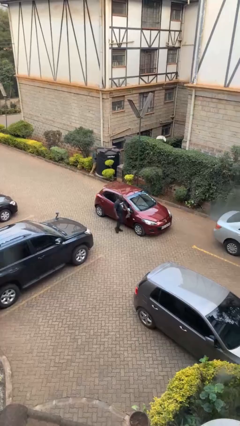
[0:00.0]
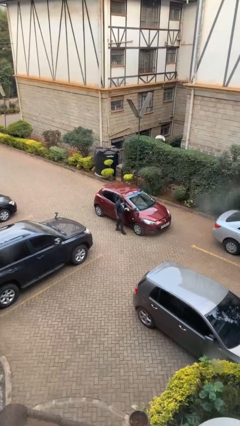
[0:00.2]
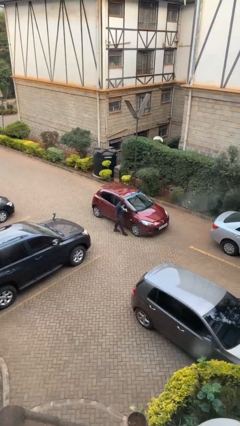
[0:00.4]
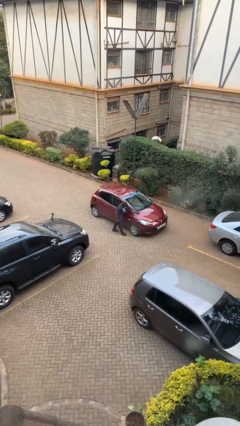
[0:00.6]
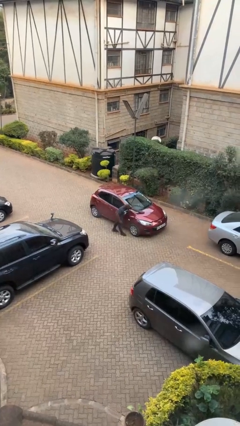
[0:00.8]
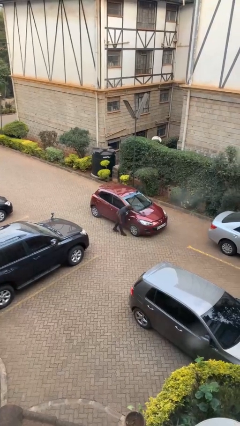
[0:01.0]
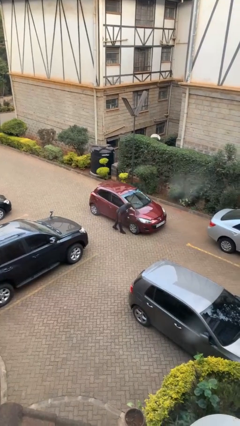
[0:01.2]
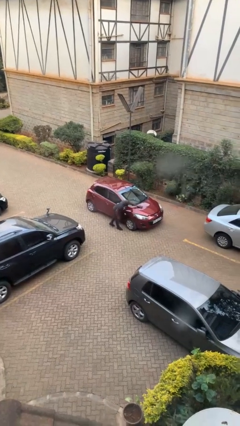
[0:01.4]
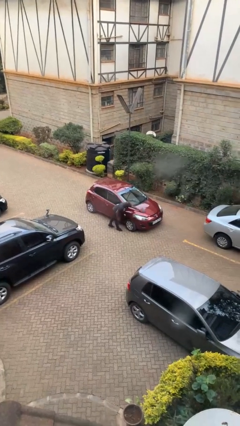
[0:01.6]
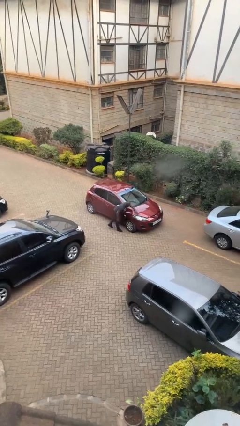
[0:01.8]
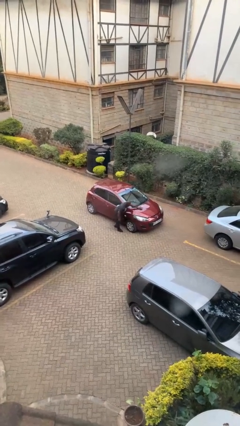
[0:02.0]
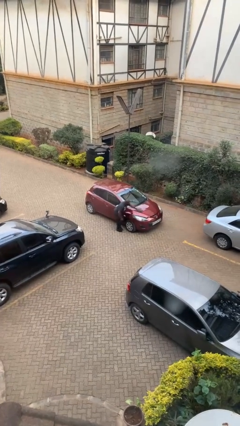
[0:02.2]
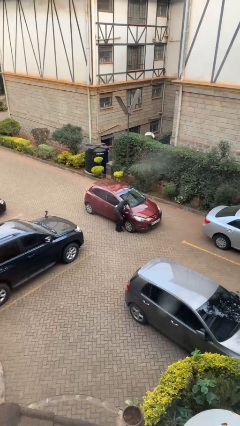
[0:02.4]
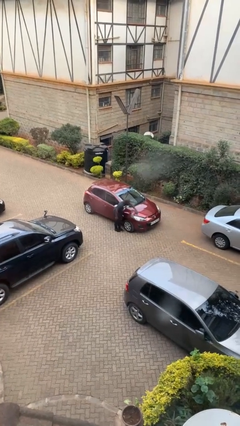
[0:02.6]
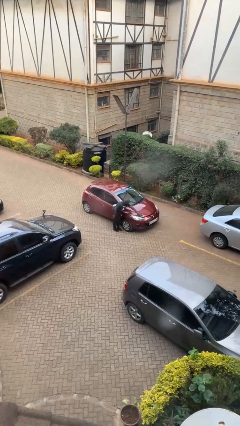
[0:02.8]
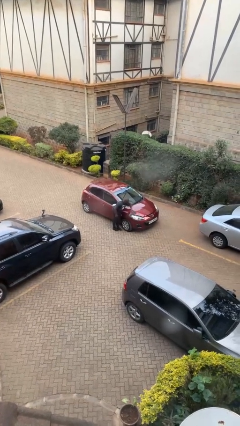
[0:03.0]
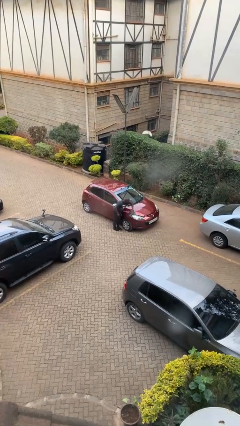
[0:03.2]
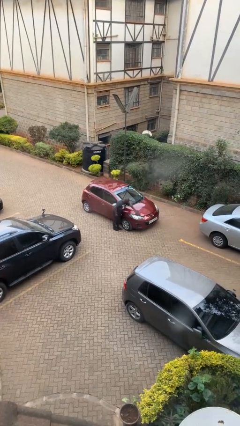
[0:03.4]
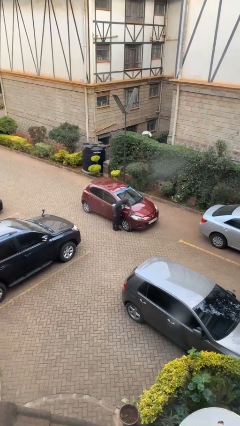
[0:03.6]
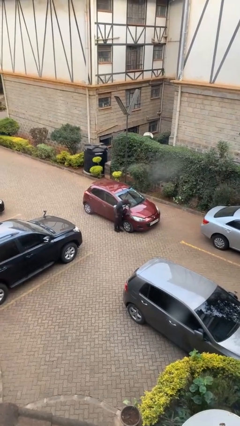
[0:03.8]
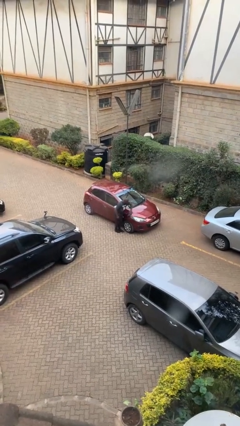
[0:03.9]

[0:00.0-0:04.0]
person polishes car with rag

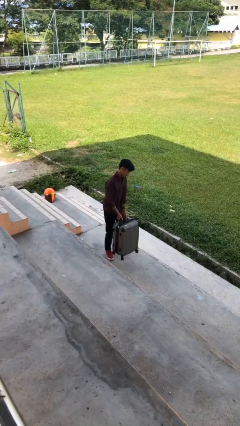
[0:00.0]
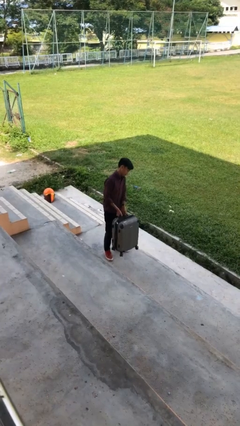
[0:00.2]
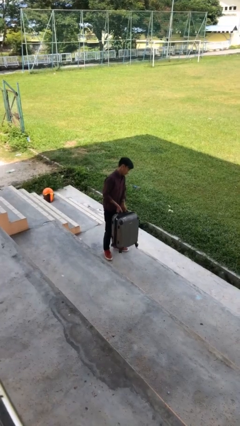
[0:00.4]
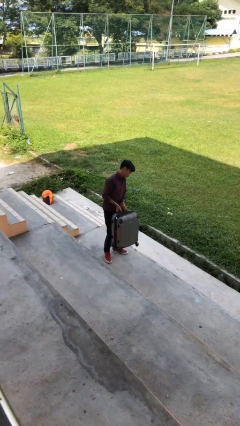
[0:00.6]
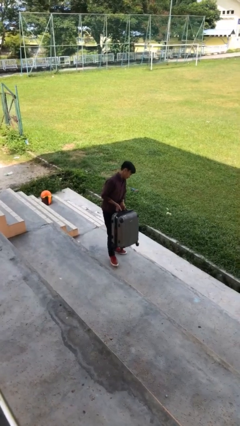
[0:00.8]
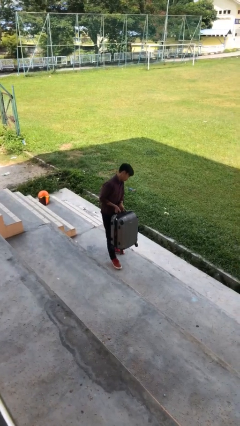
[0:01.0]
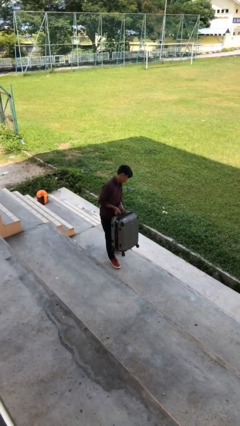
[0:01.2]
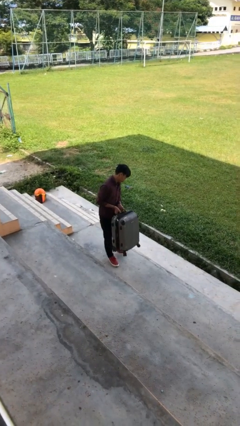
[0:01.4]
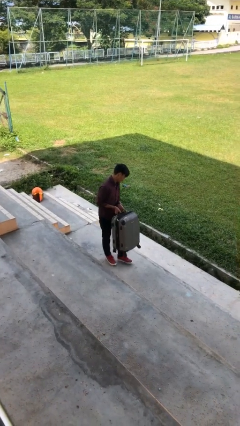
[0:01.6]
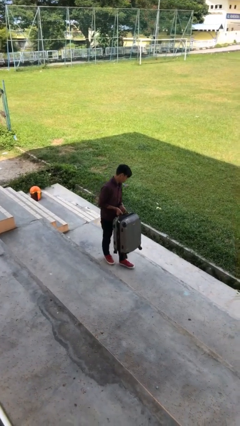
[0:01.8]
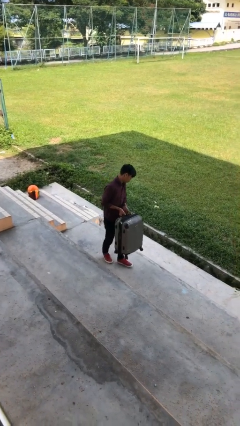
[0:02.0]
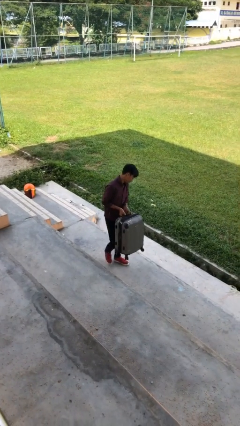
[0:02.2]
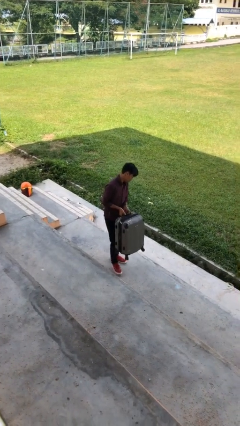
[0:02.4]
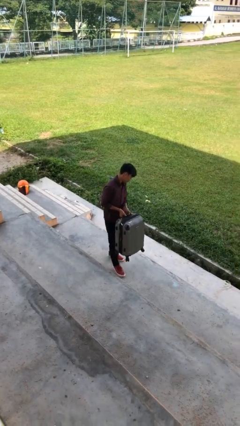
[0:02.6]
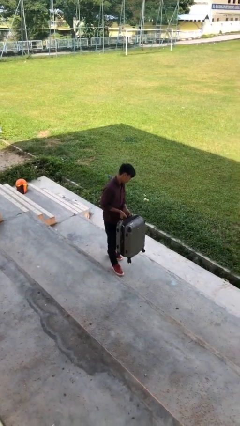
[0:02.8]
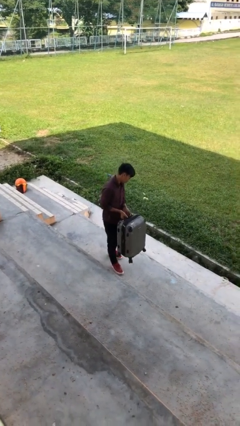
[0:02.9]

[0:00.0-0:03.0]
person carries heavy object

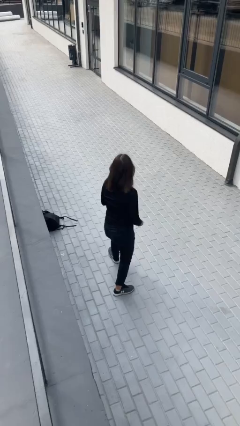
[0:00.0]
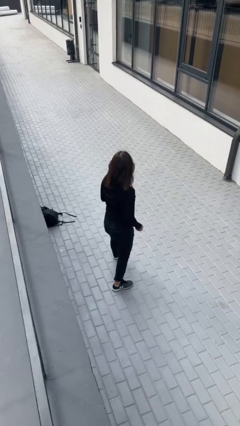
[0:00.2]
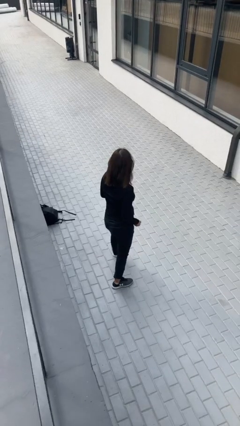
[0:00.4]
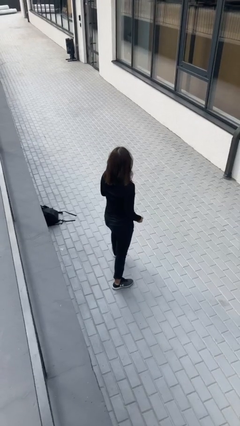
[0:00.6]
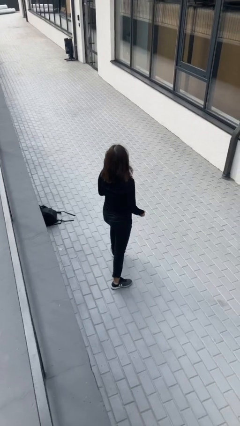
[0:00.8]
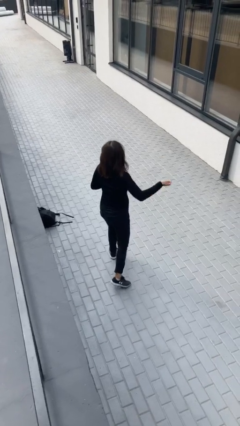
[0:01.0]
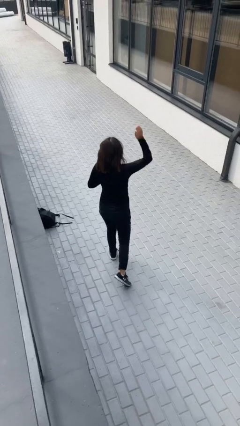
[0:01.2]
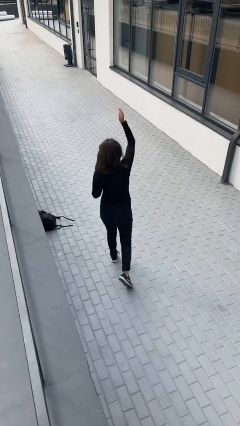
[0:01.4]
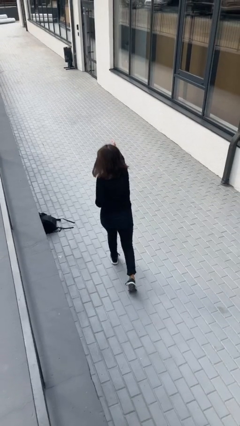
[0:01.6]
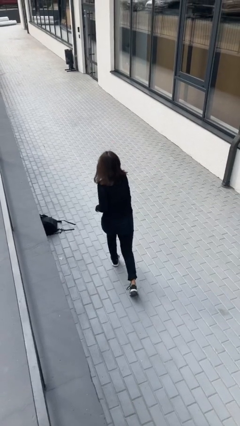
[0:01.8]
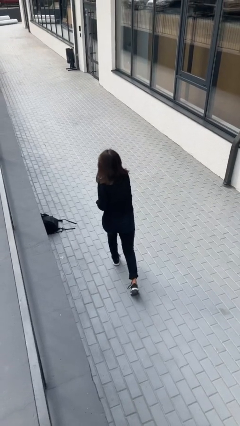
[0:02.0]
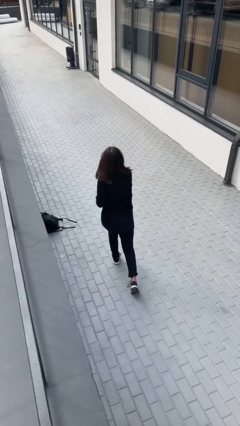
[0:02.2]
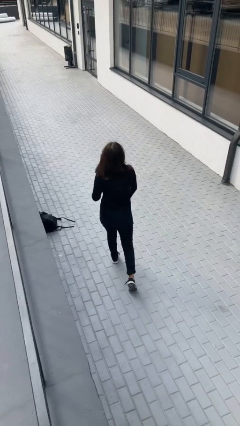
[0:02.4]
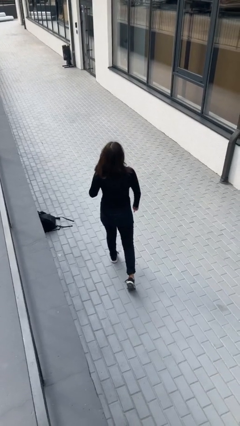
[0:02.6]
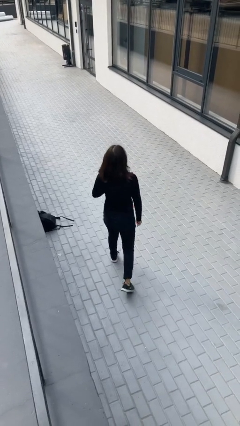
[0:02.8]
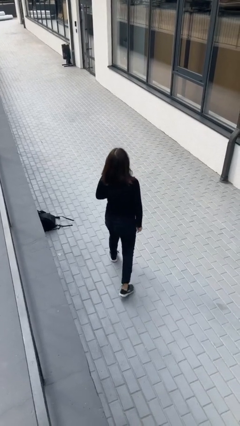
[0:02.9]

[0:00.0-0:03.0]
person karate chop

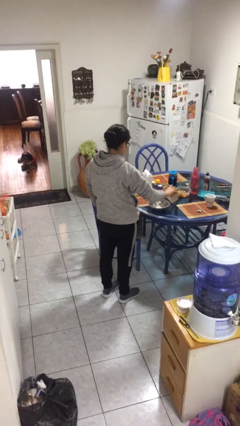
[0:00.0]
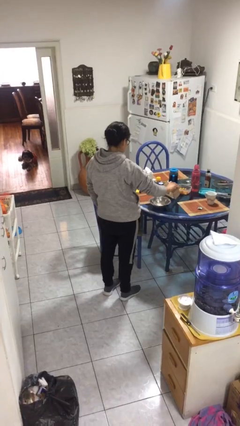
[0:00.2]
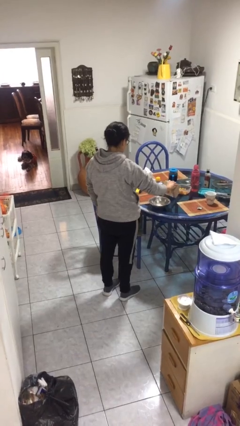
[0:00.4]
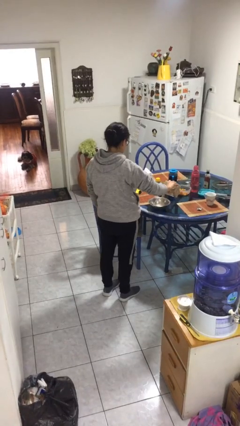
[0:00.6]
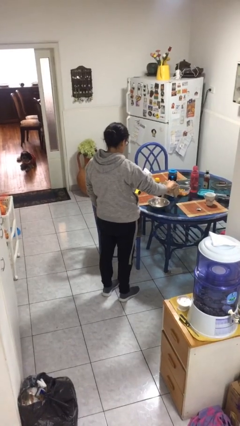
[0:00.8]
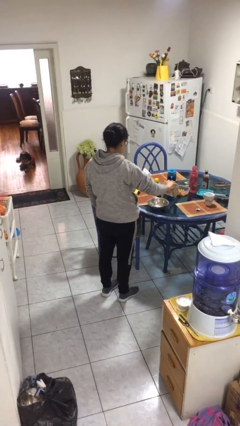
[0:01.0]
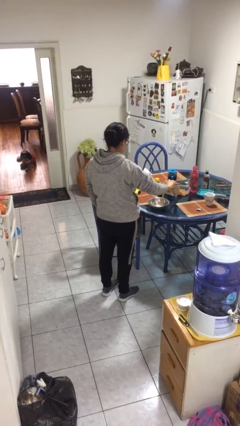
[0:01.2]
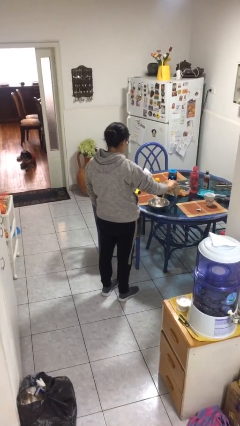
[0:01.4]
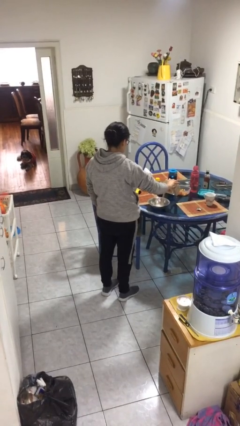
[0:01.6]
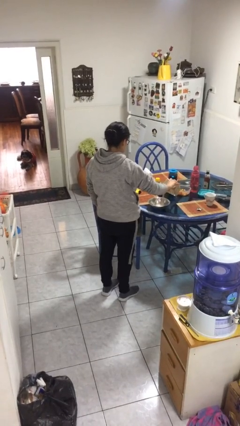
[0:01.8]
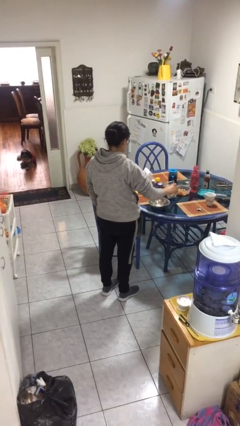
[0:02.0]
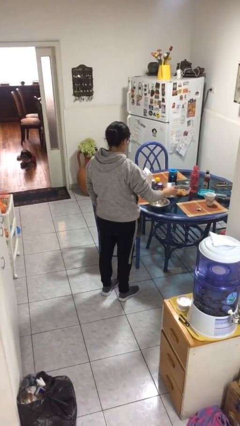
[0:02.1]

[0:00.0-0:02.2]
person pours into bowl

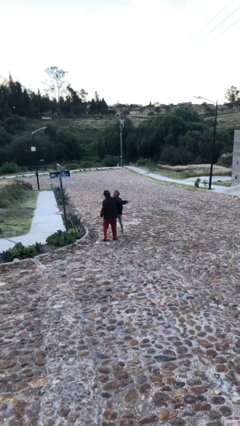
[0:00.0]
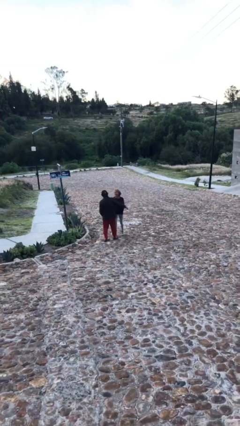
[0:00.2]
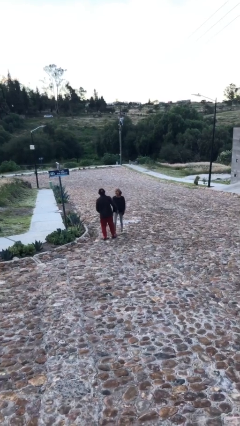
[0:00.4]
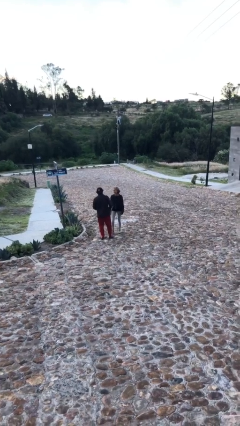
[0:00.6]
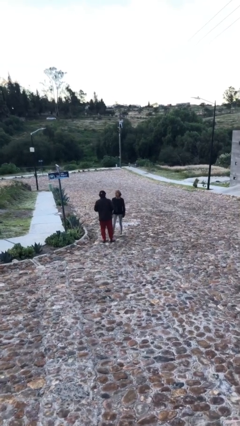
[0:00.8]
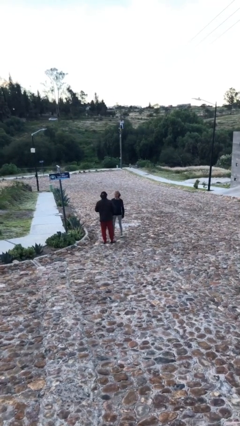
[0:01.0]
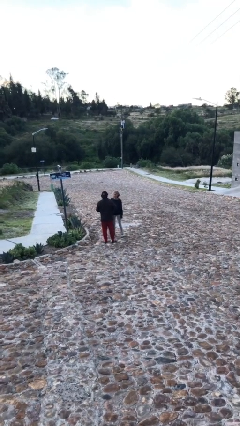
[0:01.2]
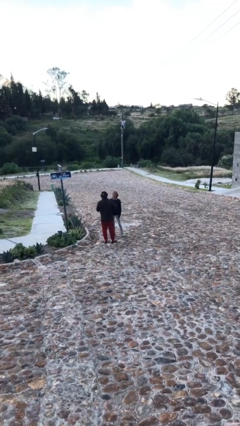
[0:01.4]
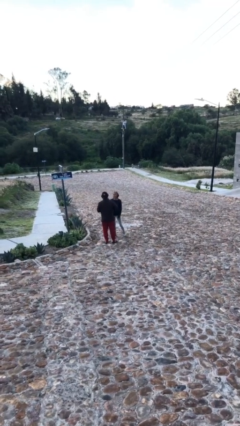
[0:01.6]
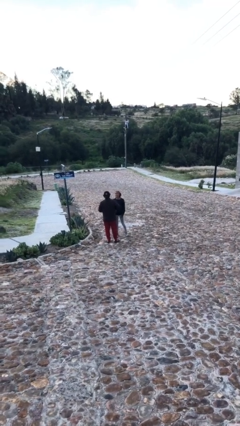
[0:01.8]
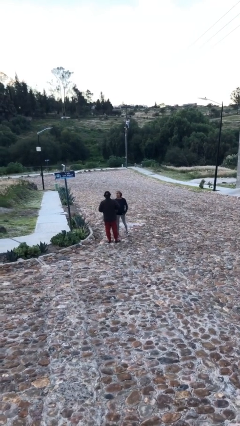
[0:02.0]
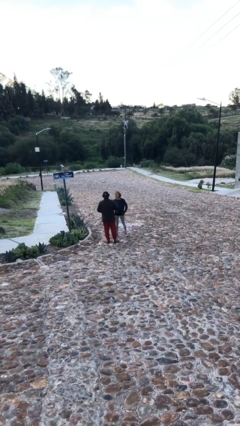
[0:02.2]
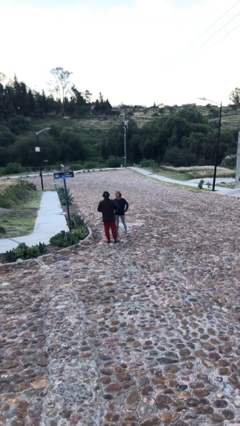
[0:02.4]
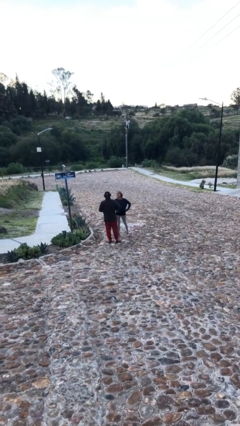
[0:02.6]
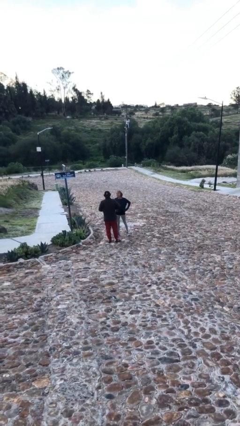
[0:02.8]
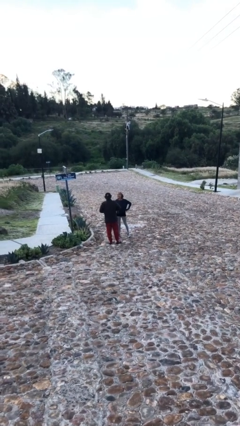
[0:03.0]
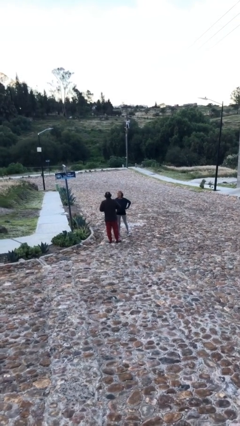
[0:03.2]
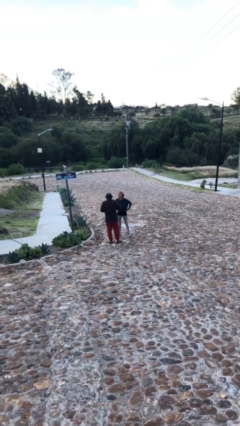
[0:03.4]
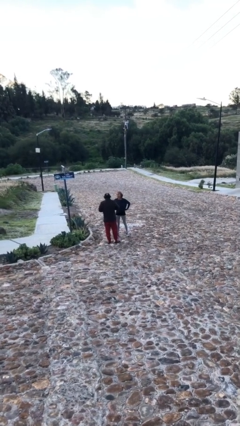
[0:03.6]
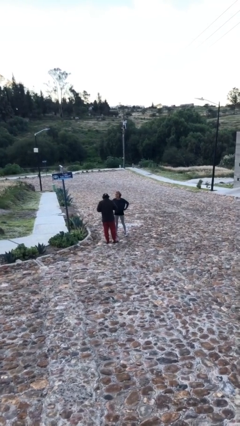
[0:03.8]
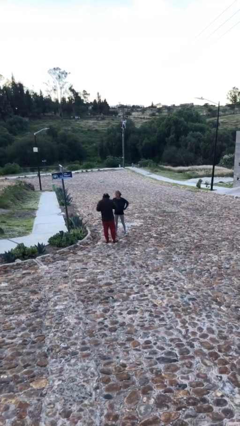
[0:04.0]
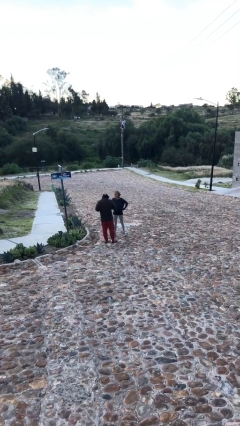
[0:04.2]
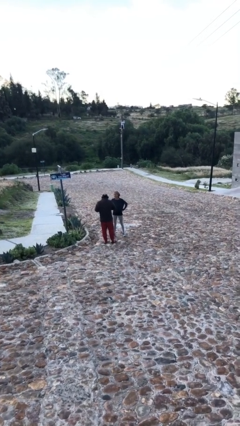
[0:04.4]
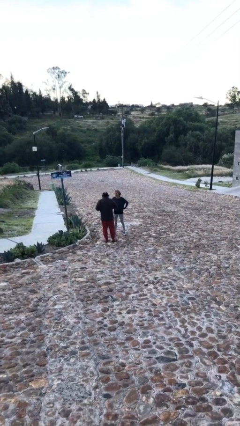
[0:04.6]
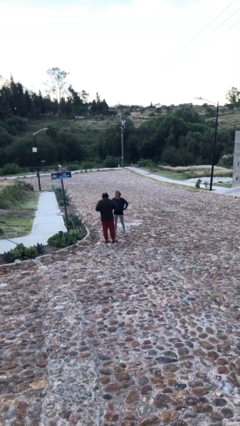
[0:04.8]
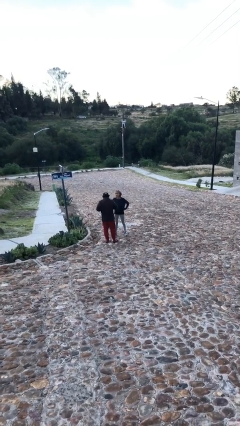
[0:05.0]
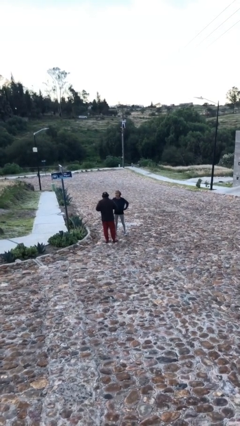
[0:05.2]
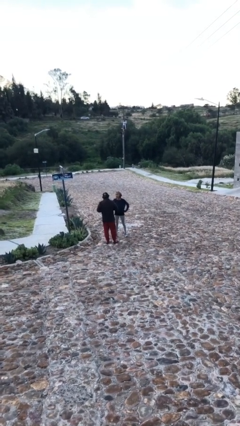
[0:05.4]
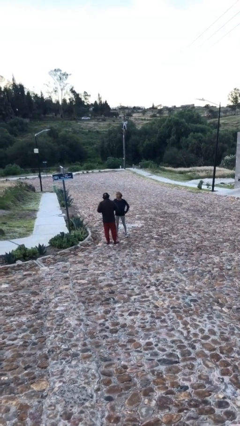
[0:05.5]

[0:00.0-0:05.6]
person talks to person
